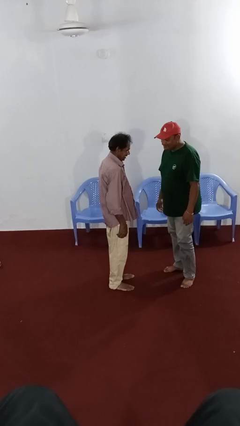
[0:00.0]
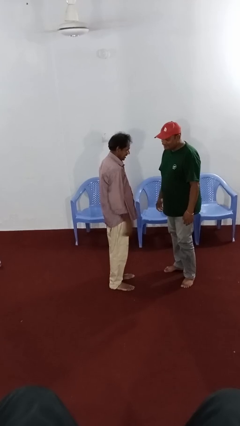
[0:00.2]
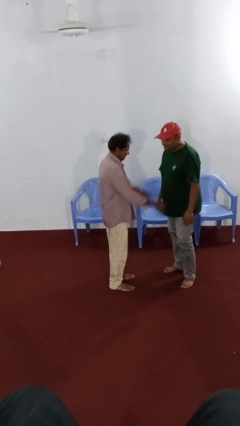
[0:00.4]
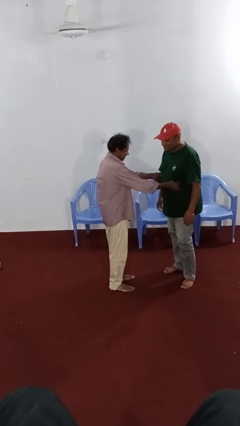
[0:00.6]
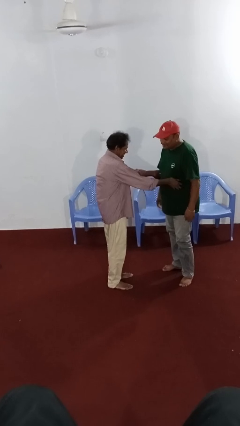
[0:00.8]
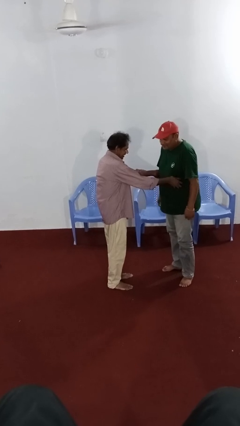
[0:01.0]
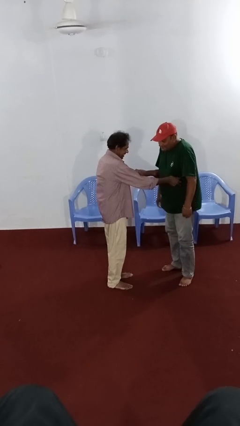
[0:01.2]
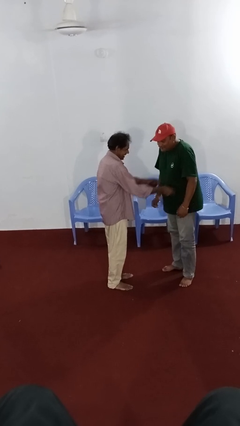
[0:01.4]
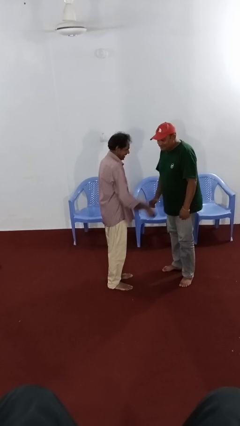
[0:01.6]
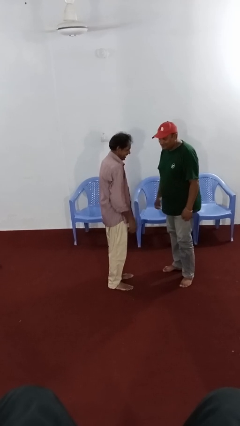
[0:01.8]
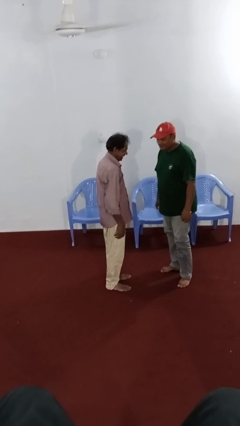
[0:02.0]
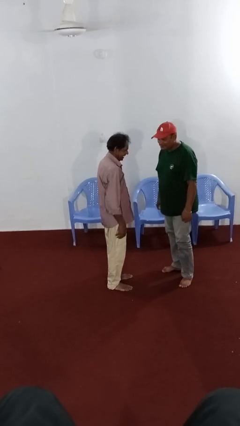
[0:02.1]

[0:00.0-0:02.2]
person tickles person

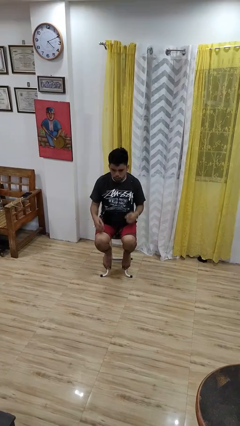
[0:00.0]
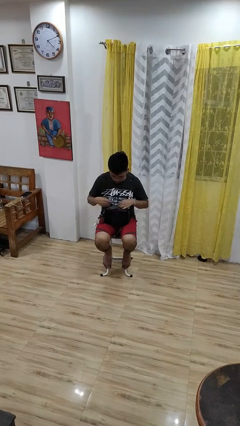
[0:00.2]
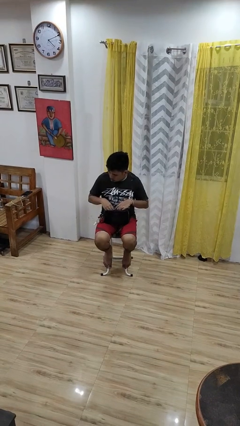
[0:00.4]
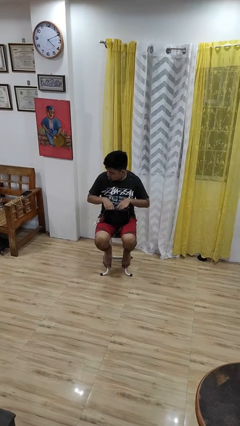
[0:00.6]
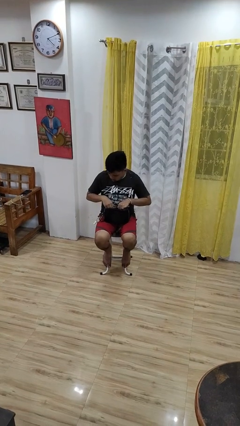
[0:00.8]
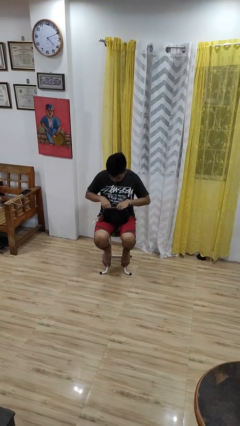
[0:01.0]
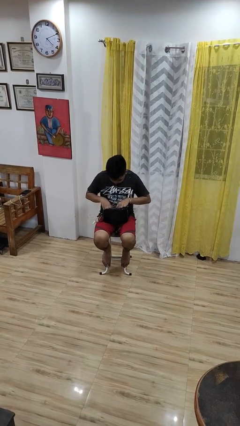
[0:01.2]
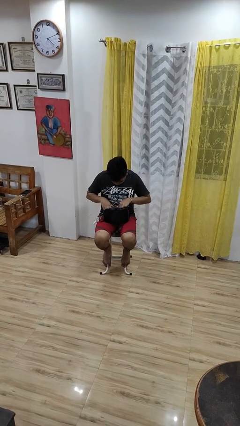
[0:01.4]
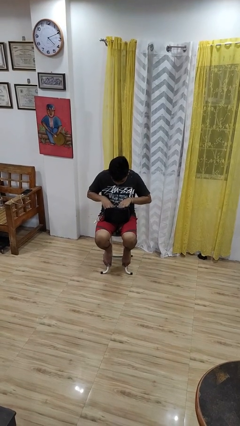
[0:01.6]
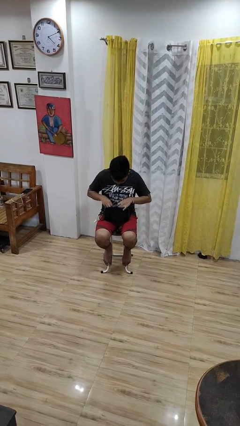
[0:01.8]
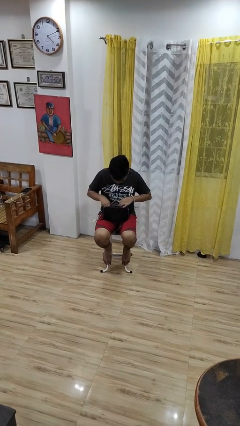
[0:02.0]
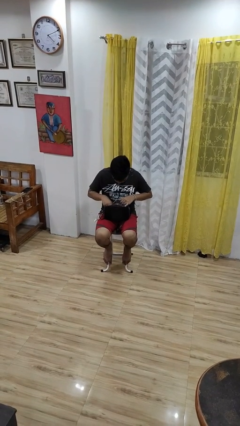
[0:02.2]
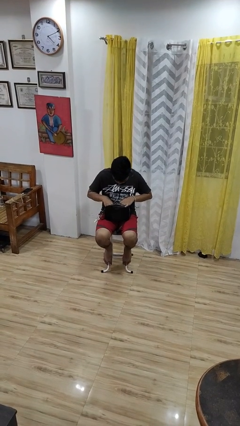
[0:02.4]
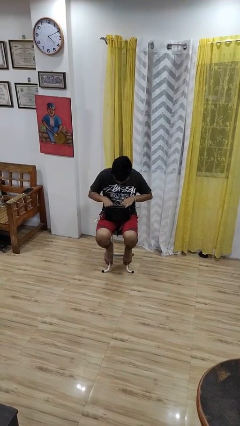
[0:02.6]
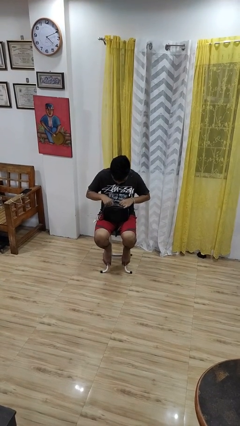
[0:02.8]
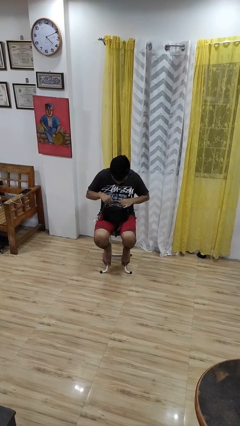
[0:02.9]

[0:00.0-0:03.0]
person searches in purse

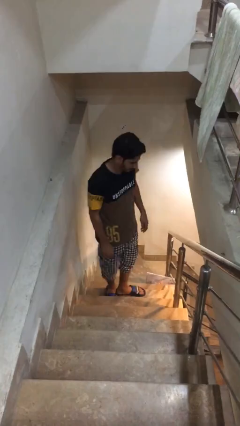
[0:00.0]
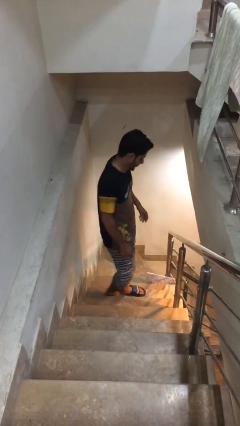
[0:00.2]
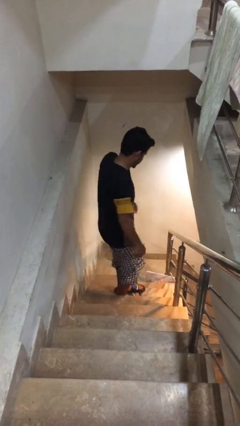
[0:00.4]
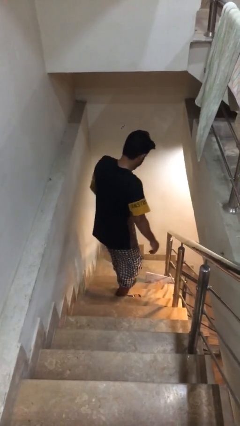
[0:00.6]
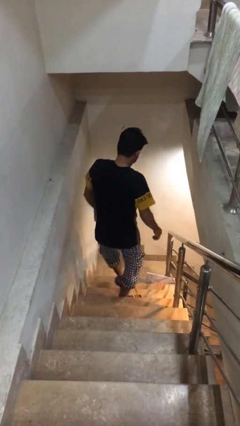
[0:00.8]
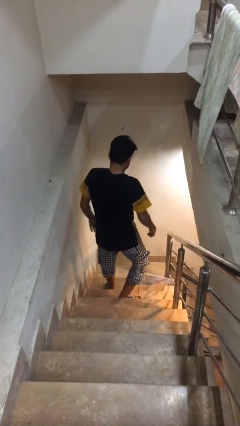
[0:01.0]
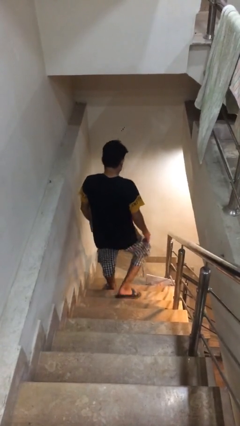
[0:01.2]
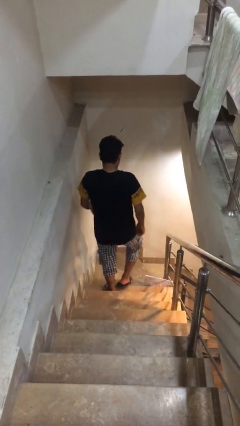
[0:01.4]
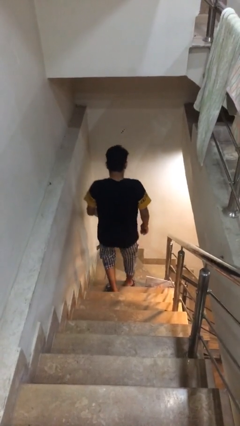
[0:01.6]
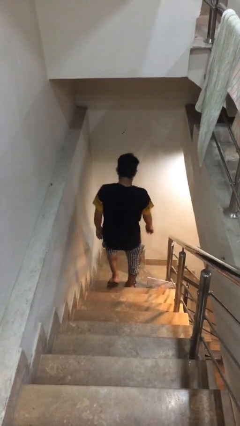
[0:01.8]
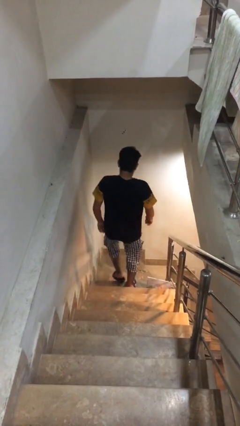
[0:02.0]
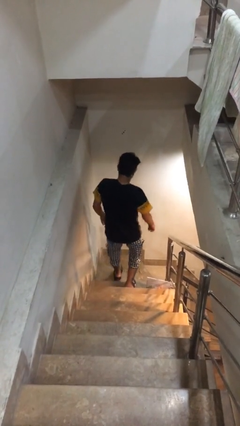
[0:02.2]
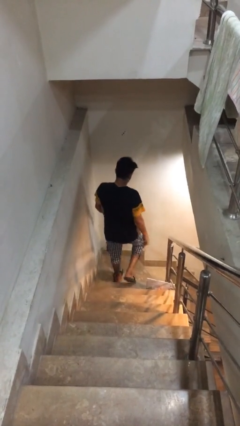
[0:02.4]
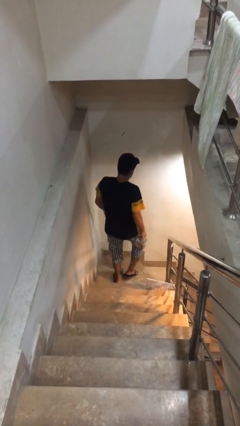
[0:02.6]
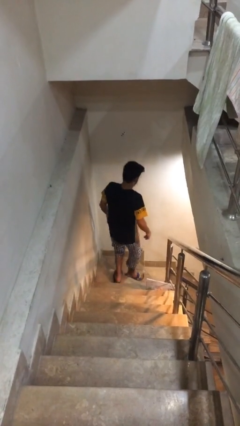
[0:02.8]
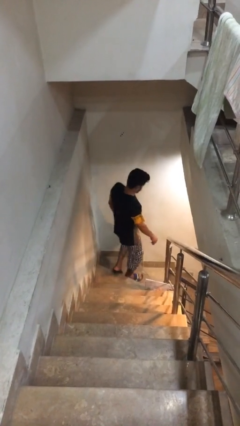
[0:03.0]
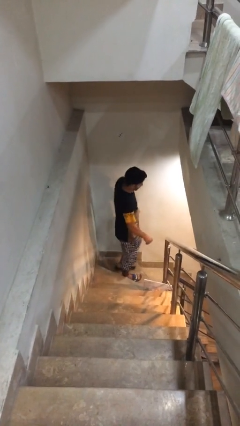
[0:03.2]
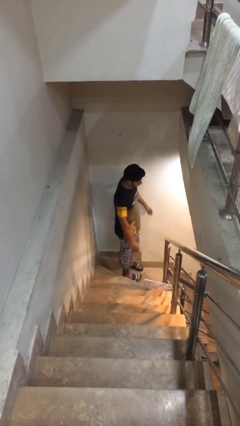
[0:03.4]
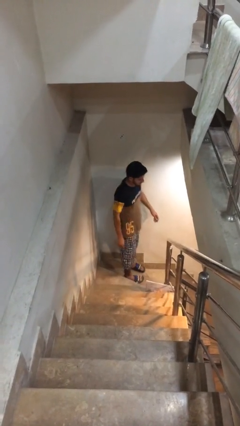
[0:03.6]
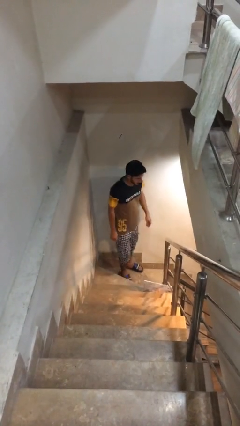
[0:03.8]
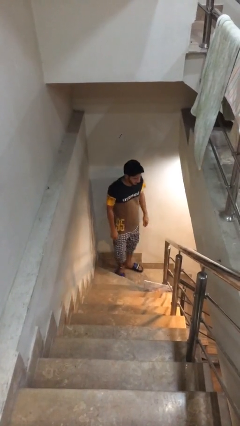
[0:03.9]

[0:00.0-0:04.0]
person climbs down stairs

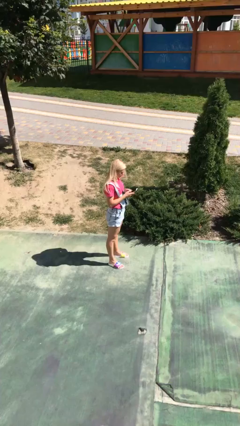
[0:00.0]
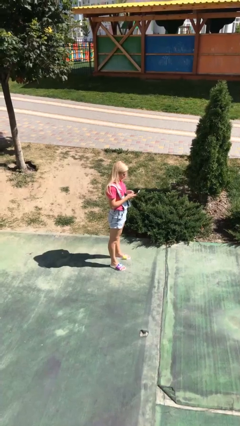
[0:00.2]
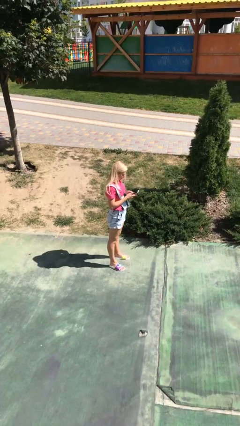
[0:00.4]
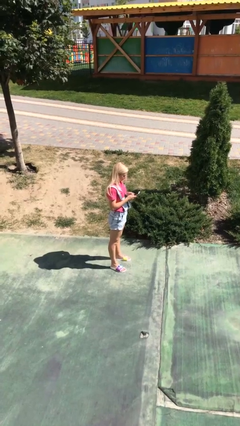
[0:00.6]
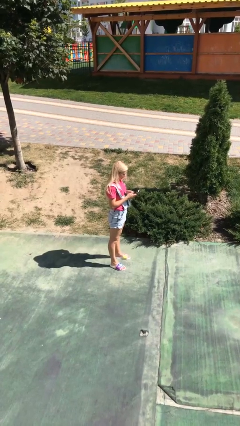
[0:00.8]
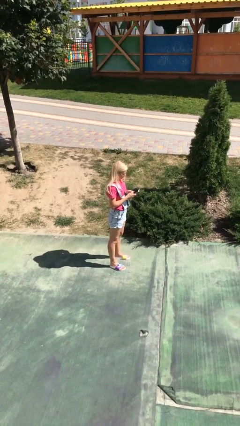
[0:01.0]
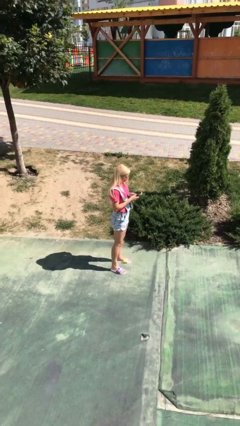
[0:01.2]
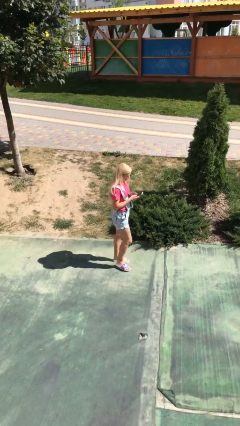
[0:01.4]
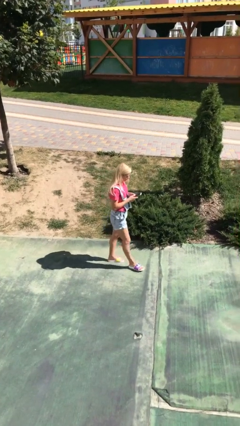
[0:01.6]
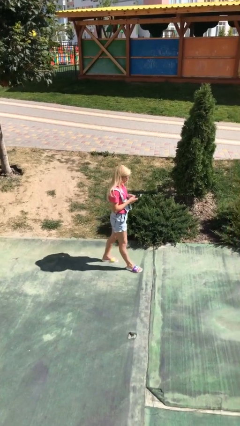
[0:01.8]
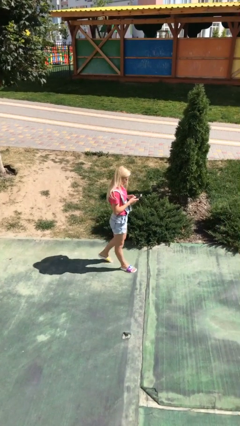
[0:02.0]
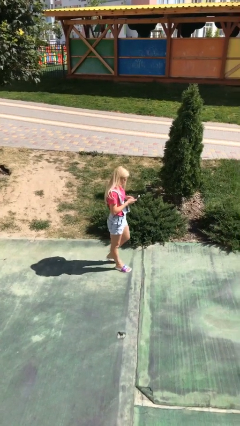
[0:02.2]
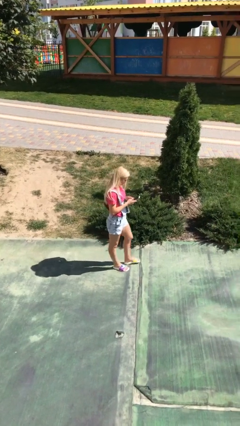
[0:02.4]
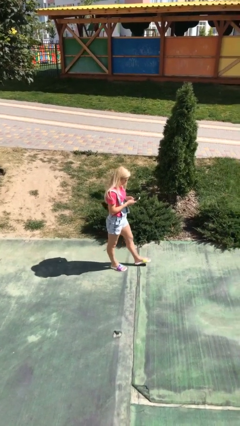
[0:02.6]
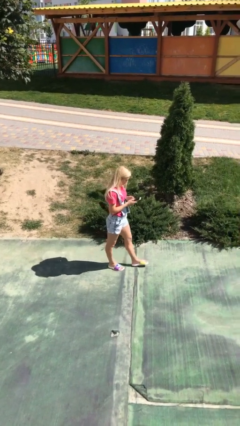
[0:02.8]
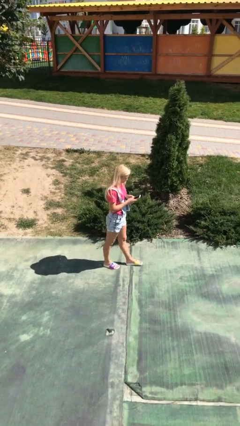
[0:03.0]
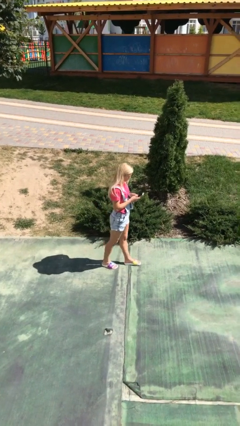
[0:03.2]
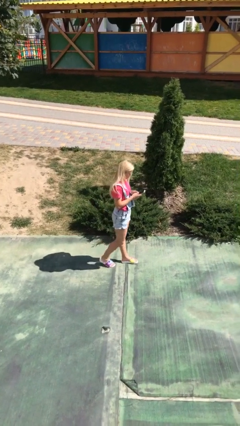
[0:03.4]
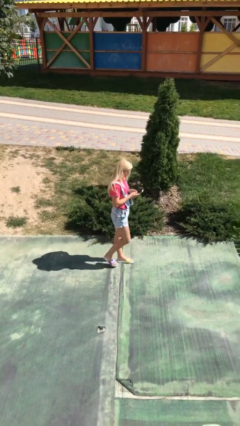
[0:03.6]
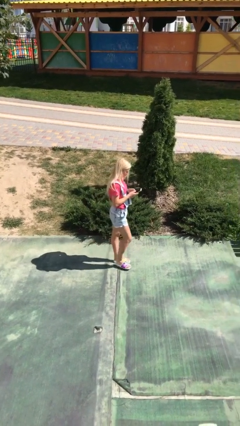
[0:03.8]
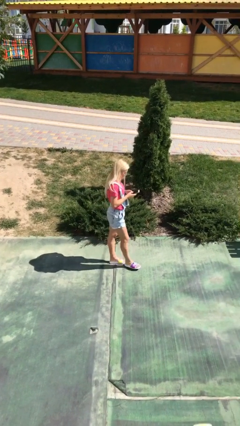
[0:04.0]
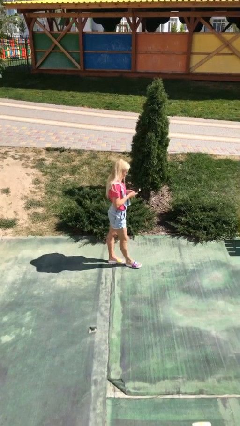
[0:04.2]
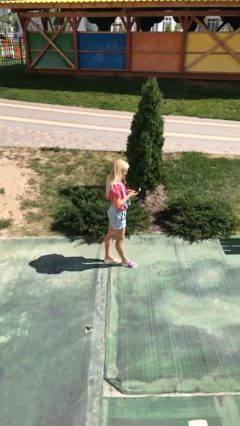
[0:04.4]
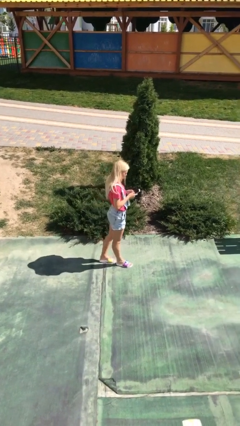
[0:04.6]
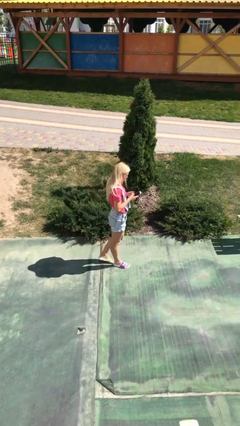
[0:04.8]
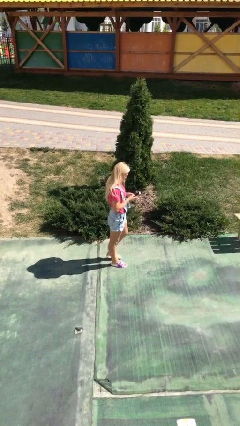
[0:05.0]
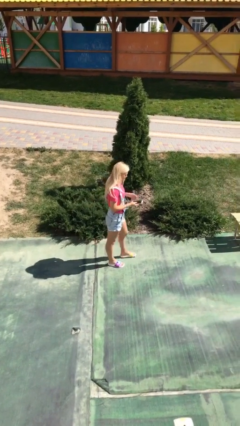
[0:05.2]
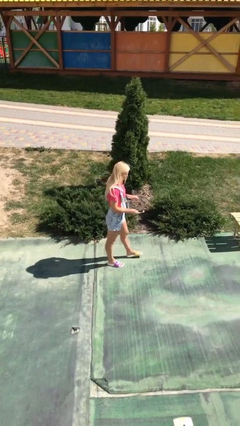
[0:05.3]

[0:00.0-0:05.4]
person texts on phone

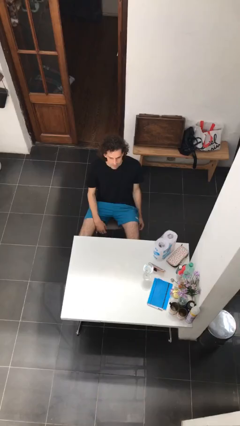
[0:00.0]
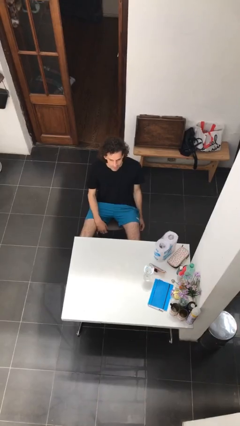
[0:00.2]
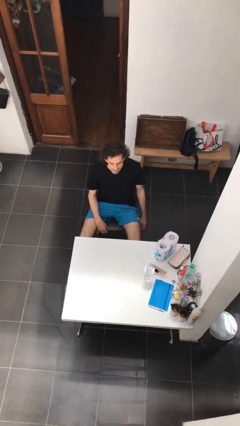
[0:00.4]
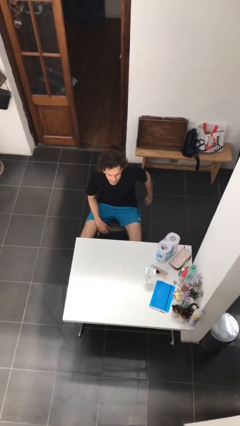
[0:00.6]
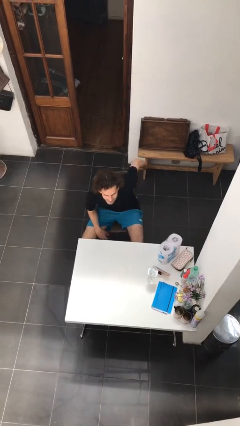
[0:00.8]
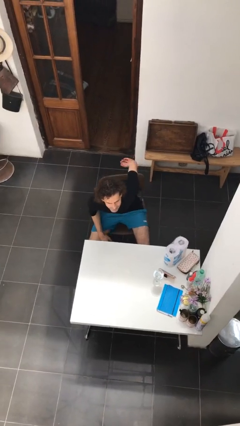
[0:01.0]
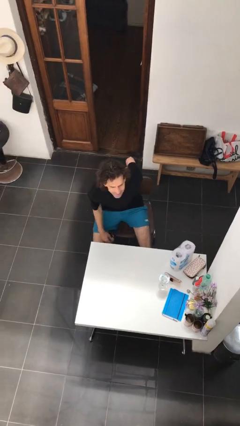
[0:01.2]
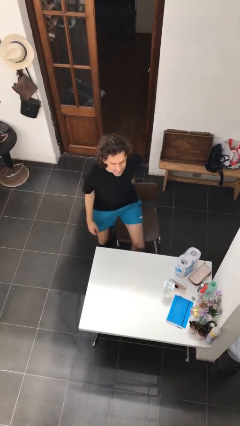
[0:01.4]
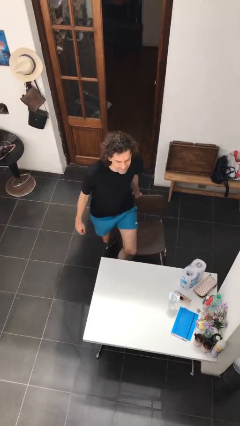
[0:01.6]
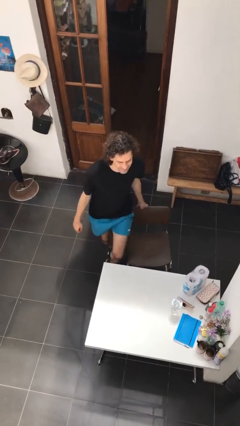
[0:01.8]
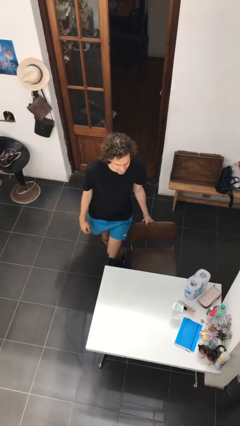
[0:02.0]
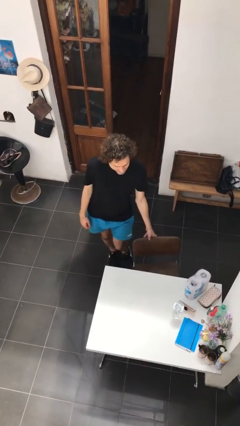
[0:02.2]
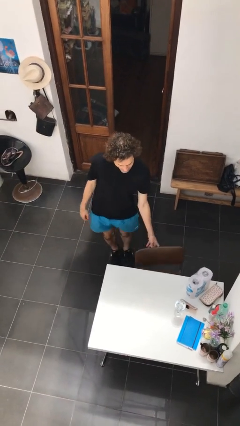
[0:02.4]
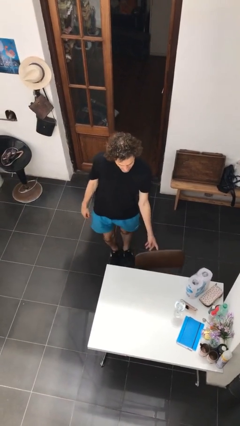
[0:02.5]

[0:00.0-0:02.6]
person stands up

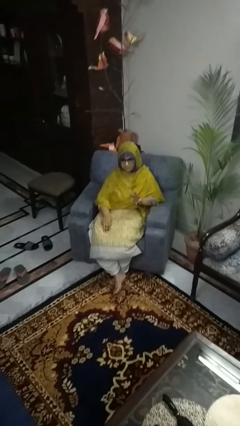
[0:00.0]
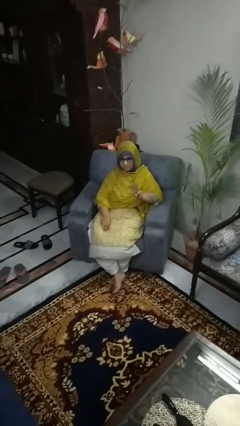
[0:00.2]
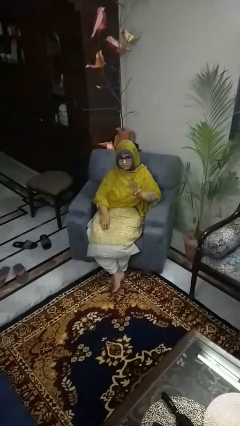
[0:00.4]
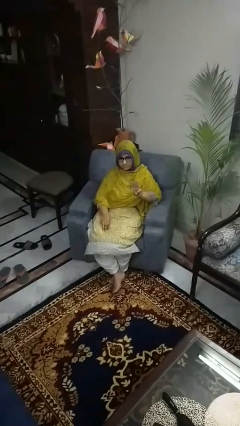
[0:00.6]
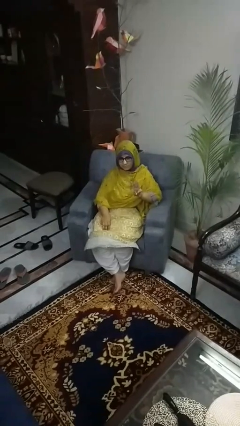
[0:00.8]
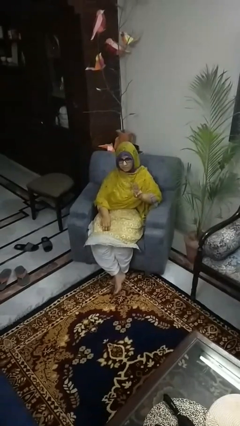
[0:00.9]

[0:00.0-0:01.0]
person gestures number three
